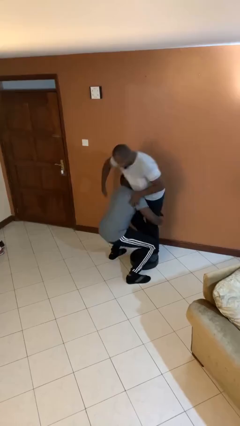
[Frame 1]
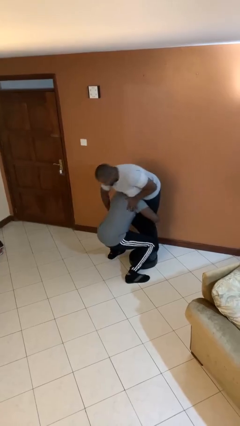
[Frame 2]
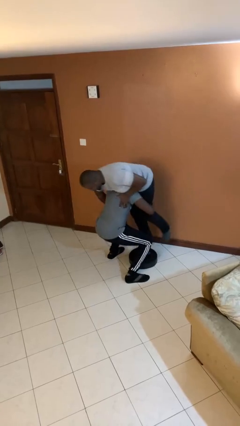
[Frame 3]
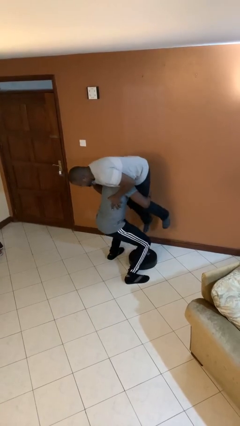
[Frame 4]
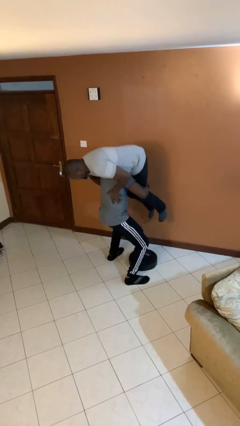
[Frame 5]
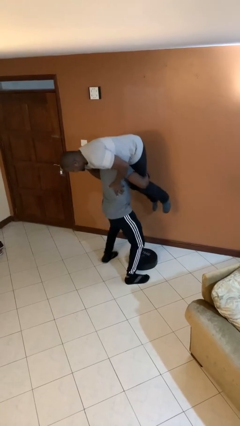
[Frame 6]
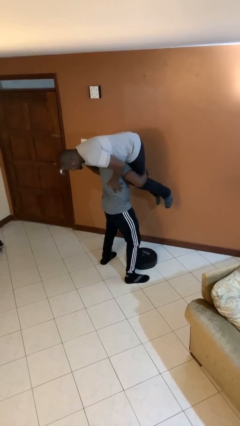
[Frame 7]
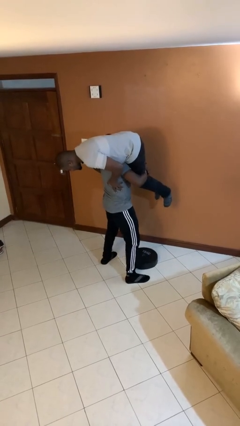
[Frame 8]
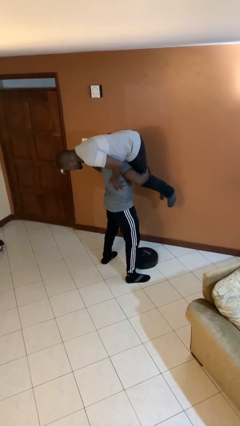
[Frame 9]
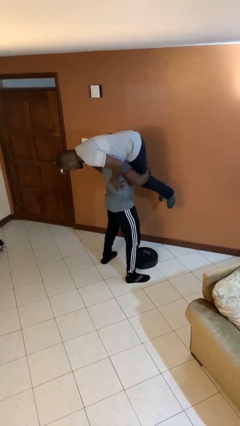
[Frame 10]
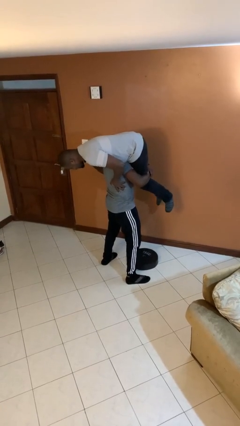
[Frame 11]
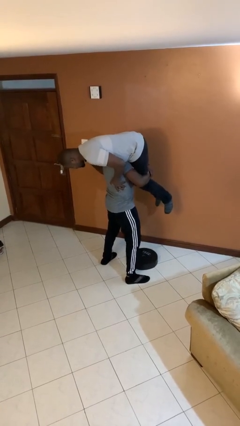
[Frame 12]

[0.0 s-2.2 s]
person carries person over shoulder

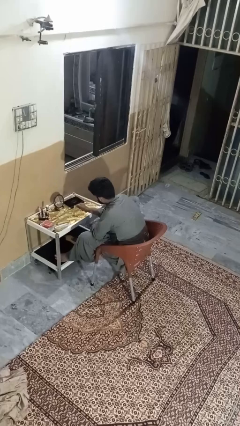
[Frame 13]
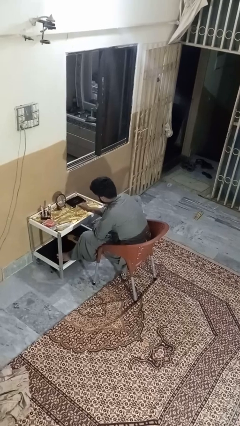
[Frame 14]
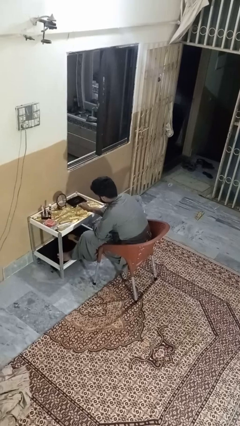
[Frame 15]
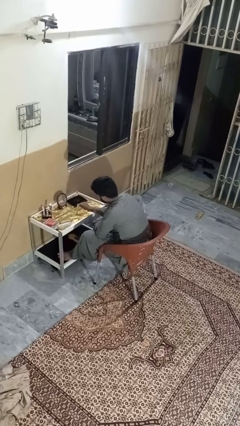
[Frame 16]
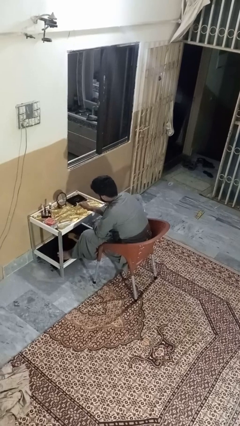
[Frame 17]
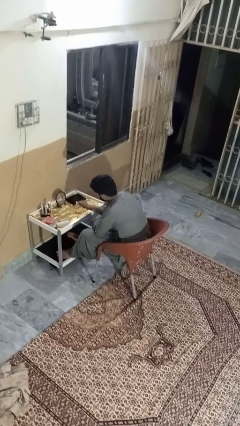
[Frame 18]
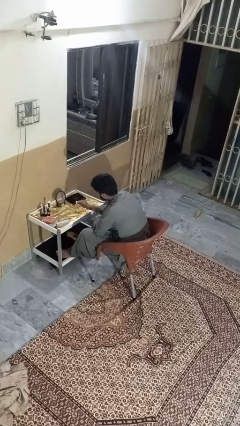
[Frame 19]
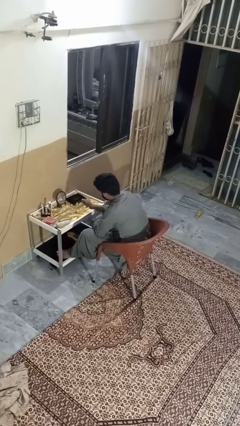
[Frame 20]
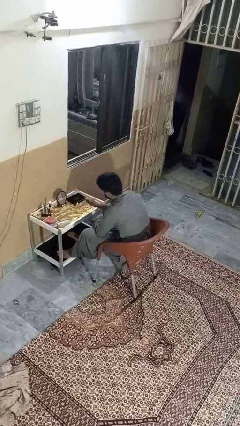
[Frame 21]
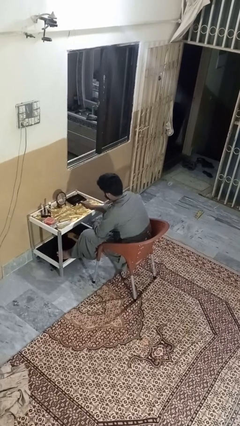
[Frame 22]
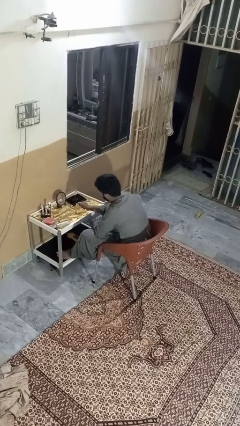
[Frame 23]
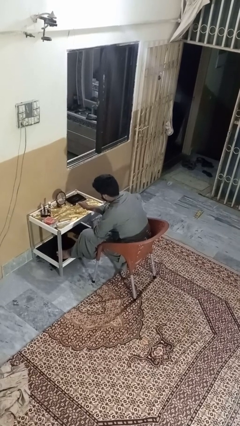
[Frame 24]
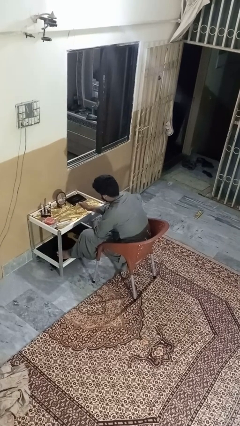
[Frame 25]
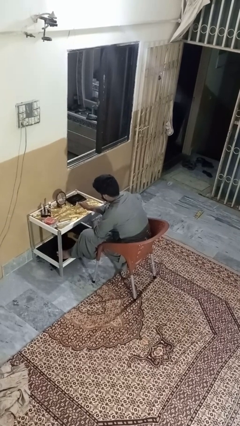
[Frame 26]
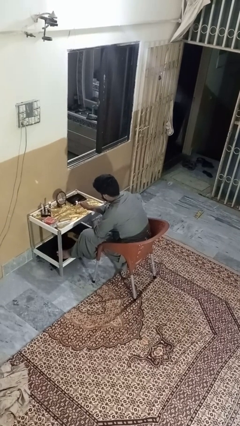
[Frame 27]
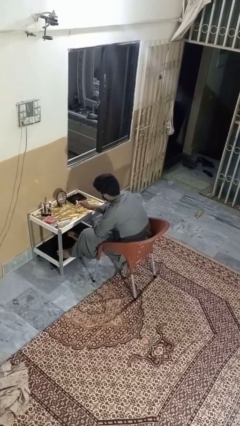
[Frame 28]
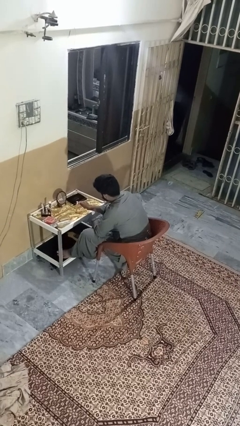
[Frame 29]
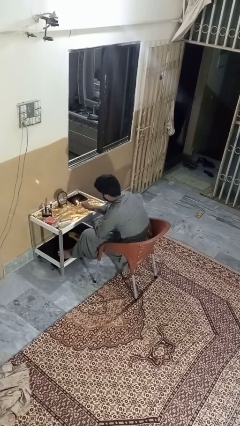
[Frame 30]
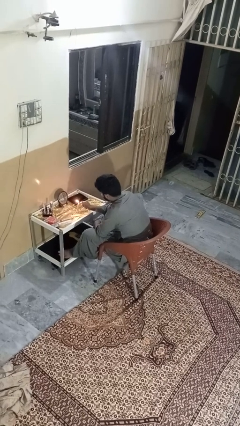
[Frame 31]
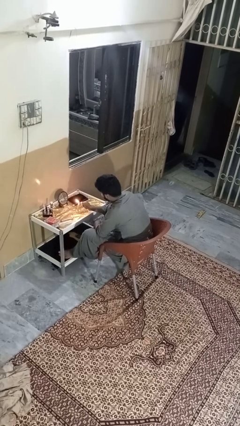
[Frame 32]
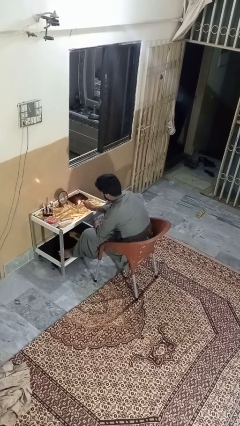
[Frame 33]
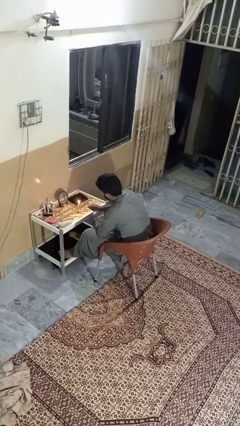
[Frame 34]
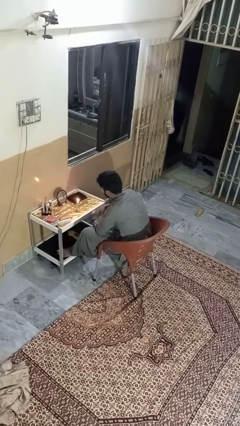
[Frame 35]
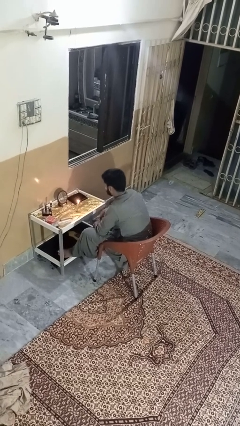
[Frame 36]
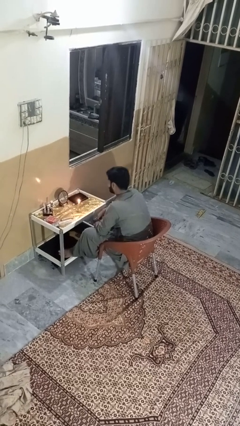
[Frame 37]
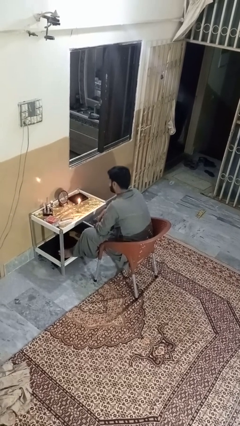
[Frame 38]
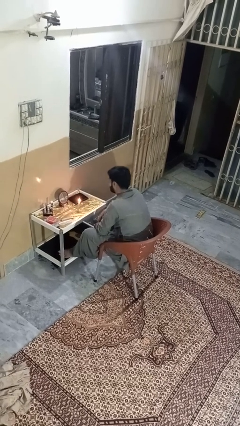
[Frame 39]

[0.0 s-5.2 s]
person lights candle

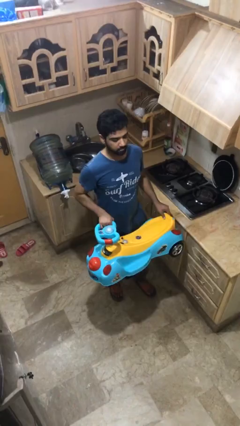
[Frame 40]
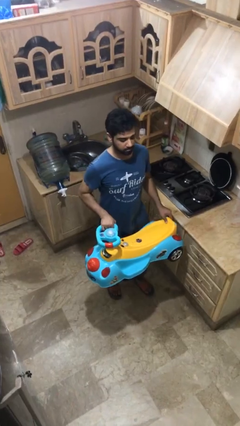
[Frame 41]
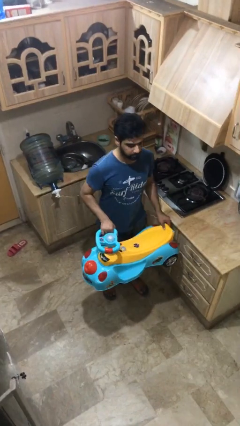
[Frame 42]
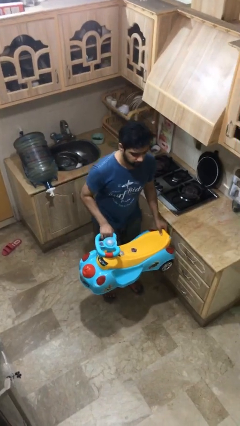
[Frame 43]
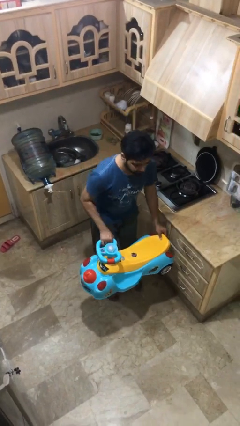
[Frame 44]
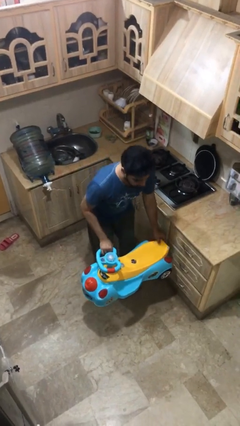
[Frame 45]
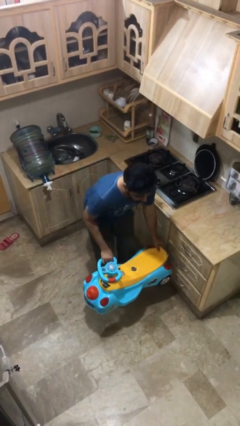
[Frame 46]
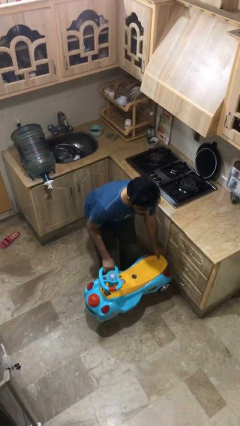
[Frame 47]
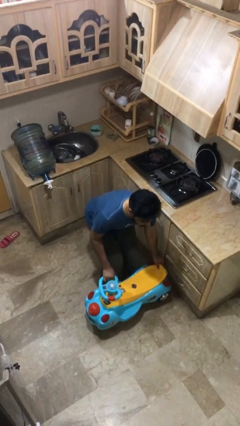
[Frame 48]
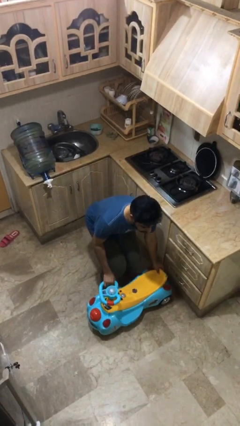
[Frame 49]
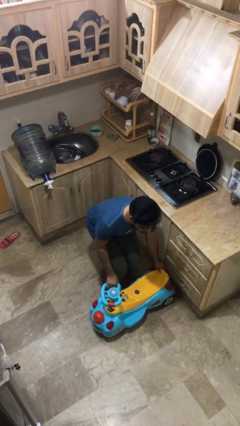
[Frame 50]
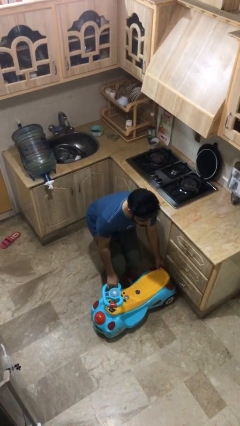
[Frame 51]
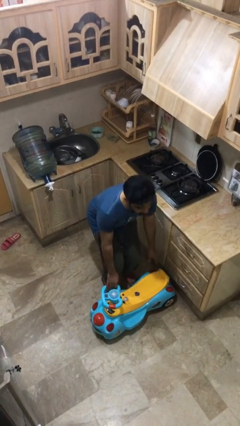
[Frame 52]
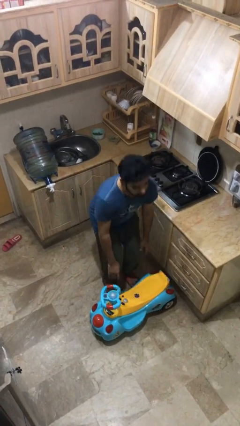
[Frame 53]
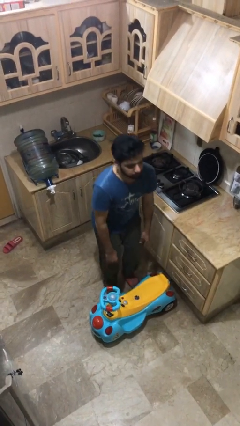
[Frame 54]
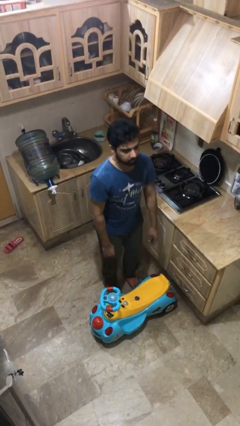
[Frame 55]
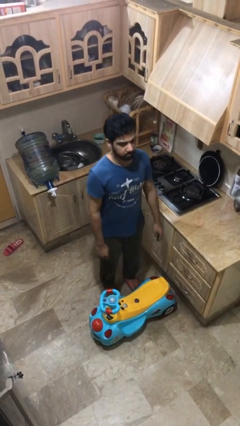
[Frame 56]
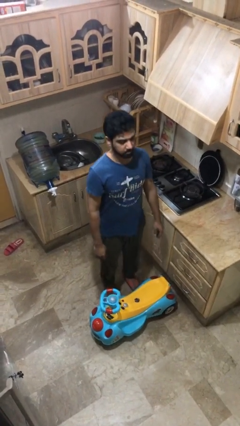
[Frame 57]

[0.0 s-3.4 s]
person puts down object on floor

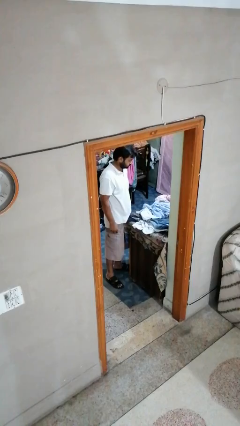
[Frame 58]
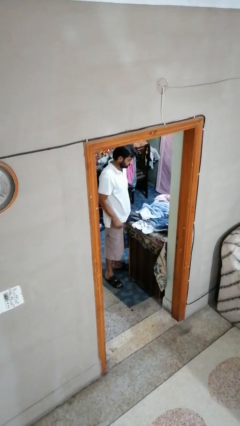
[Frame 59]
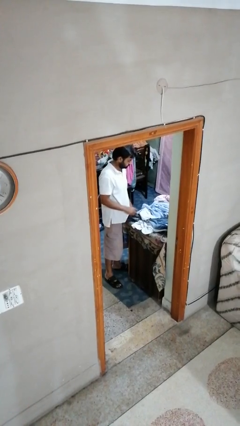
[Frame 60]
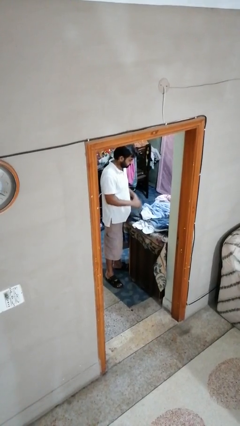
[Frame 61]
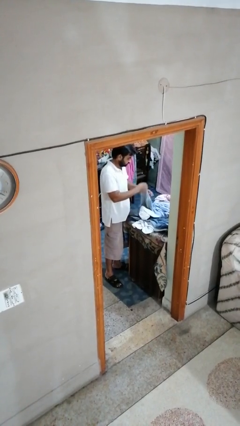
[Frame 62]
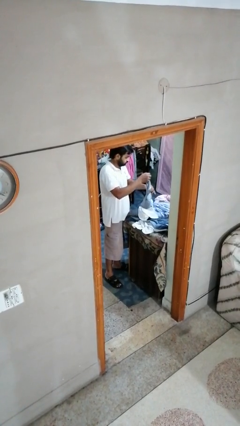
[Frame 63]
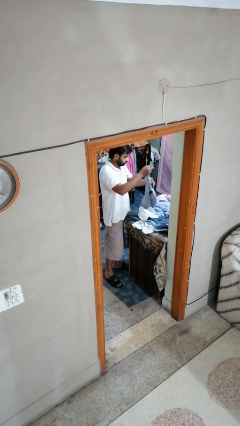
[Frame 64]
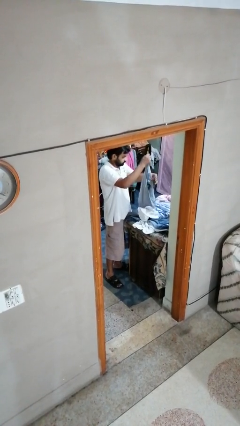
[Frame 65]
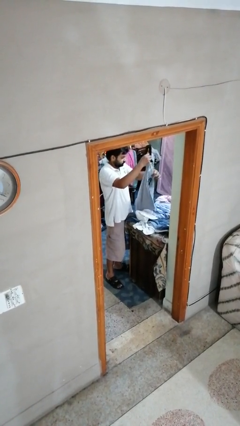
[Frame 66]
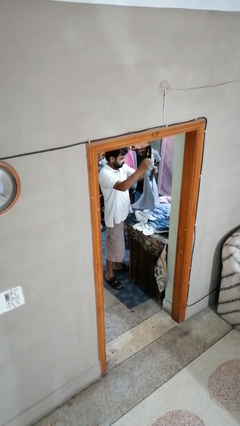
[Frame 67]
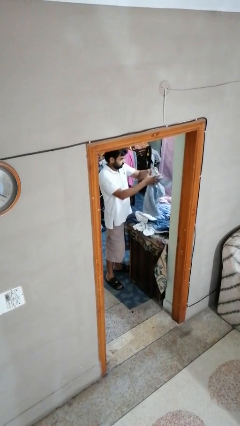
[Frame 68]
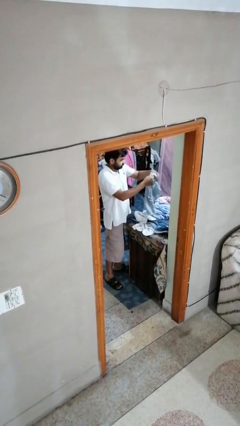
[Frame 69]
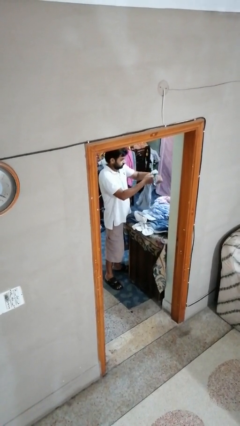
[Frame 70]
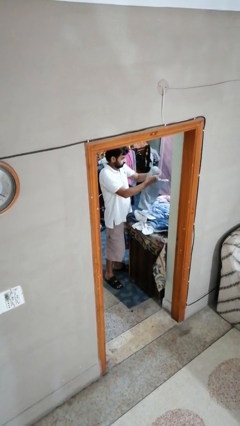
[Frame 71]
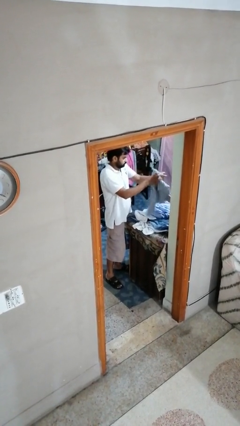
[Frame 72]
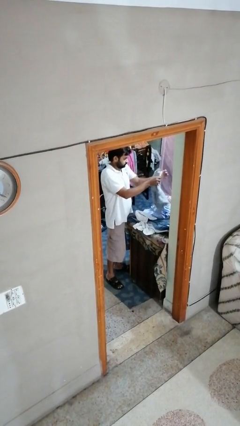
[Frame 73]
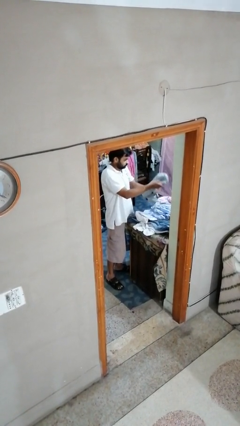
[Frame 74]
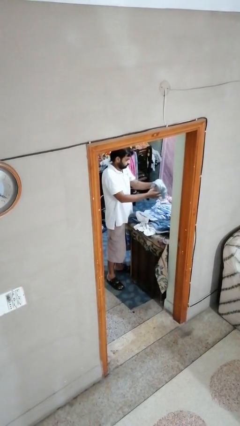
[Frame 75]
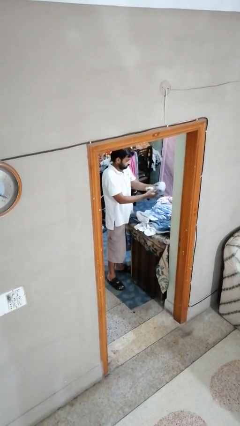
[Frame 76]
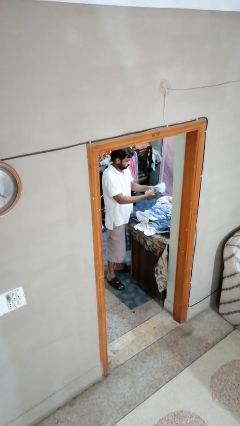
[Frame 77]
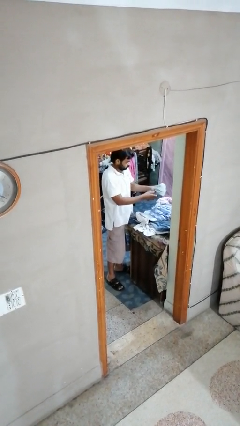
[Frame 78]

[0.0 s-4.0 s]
person folds shirt

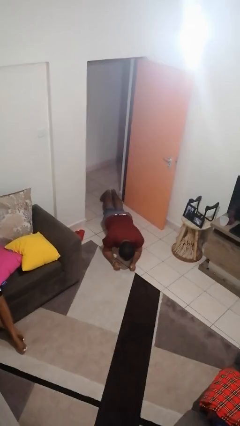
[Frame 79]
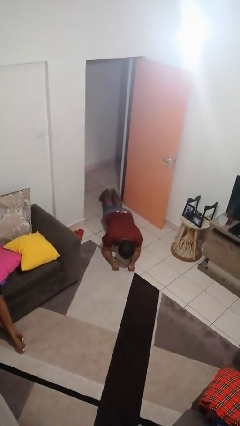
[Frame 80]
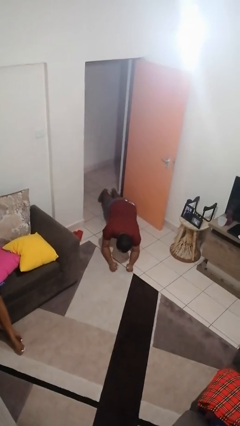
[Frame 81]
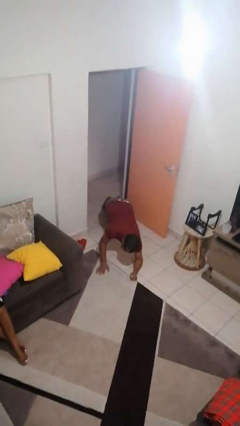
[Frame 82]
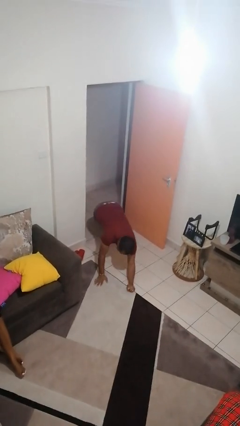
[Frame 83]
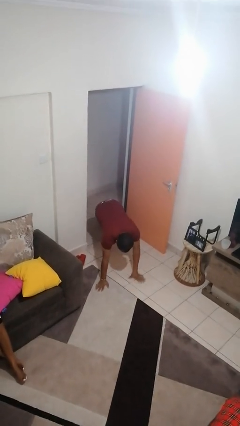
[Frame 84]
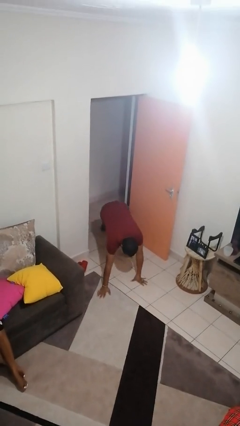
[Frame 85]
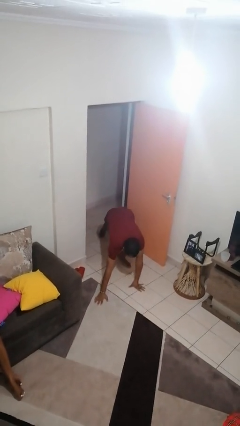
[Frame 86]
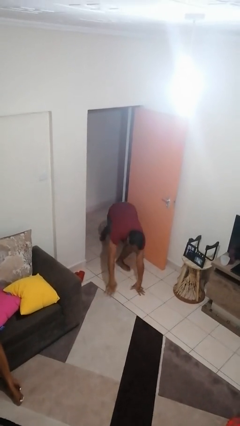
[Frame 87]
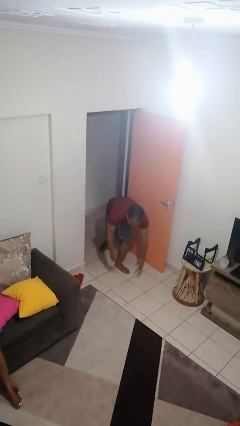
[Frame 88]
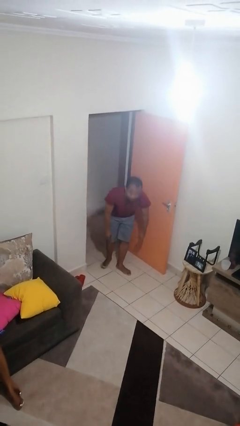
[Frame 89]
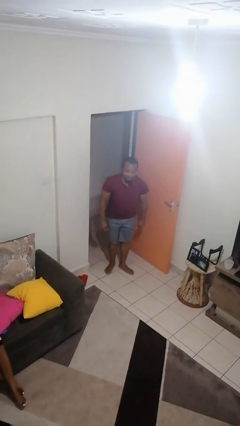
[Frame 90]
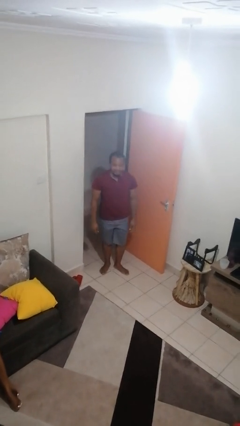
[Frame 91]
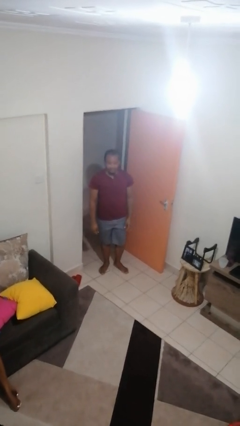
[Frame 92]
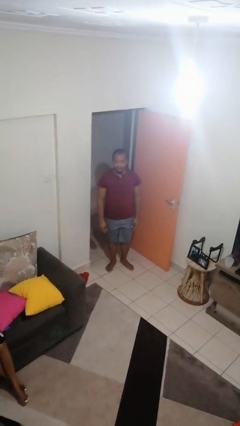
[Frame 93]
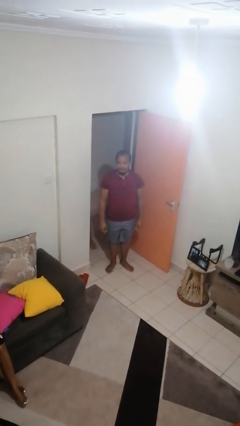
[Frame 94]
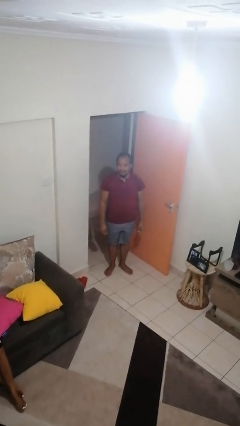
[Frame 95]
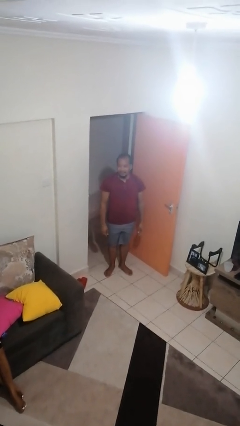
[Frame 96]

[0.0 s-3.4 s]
person stands up from floor
